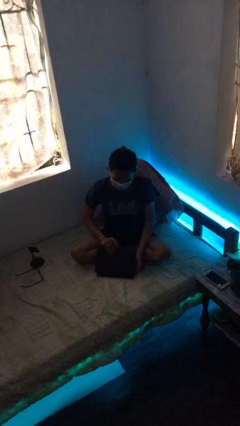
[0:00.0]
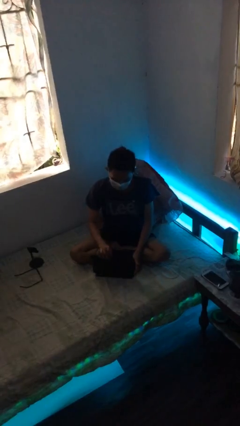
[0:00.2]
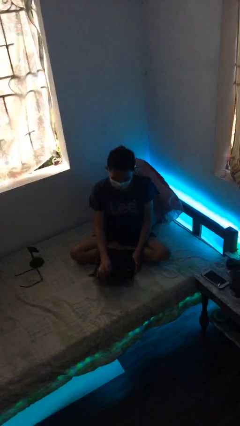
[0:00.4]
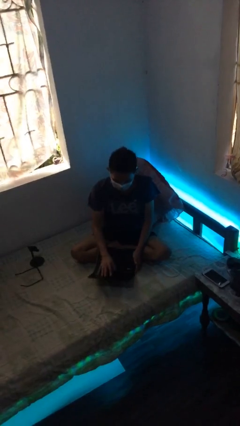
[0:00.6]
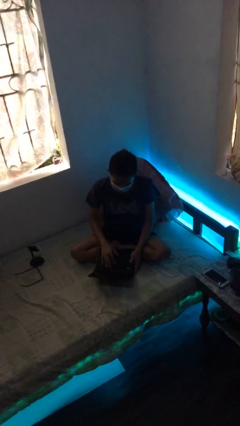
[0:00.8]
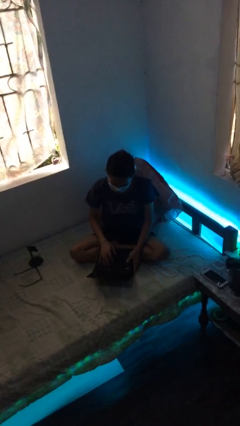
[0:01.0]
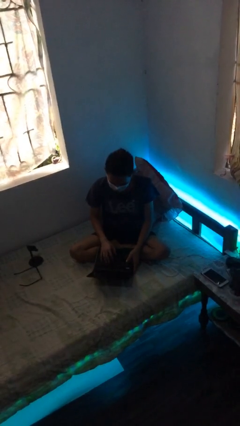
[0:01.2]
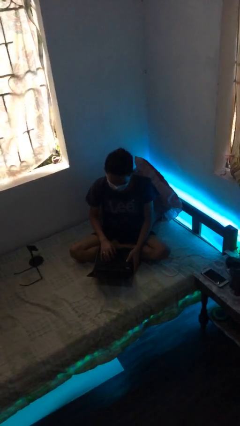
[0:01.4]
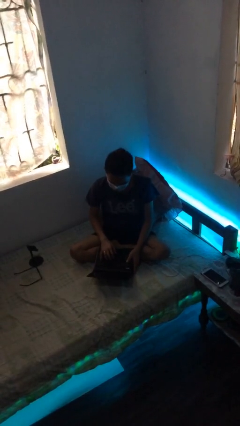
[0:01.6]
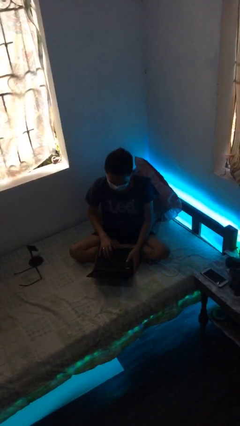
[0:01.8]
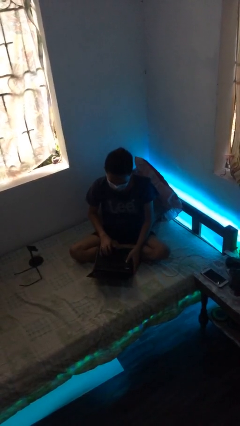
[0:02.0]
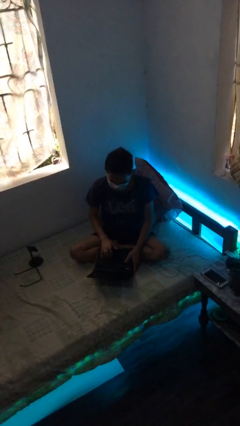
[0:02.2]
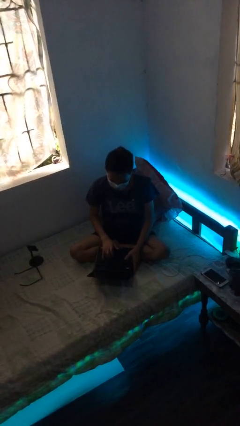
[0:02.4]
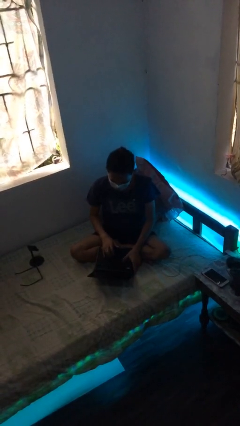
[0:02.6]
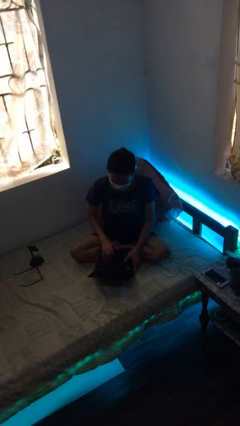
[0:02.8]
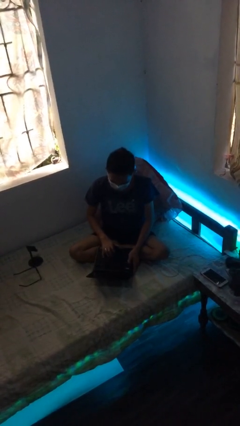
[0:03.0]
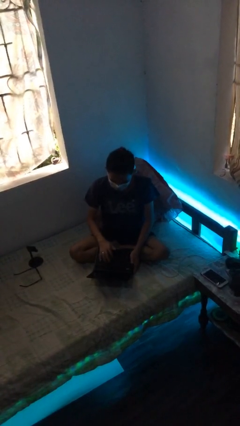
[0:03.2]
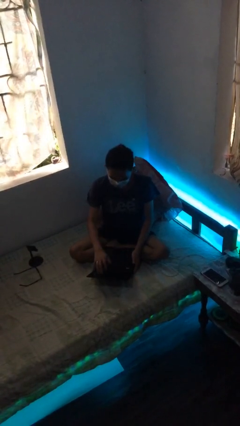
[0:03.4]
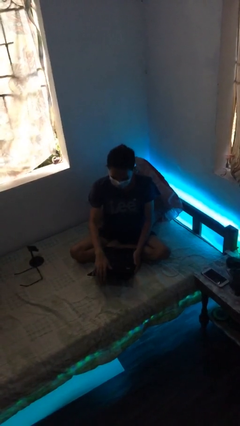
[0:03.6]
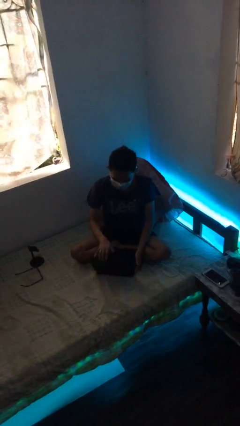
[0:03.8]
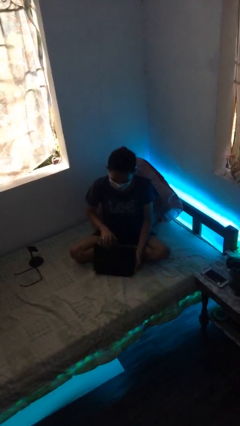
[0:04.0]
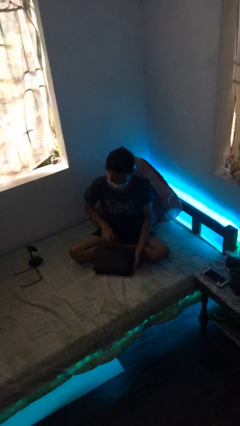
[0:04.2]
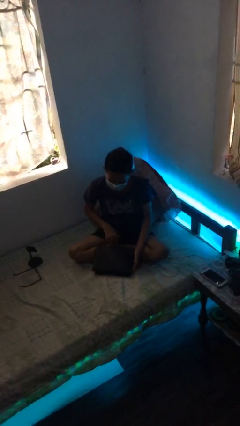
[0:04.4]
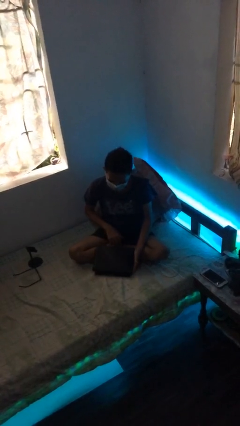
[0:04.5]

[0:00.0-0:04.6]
person interacts with laptop

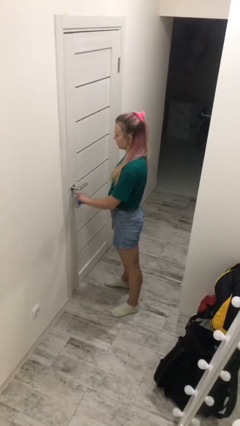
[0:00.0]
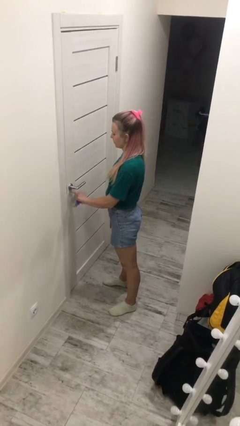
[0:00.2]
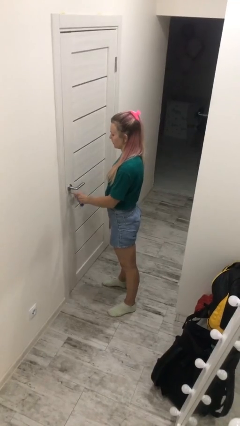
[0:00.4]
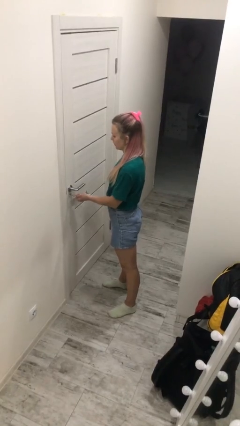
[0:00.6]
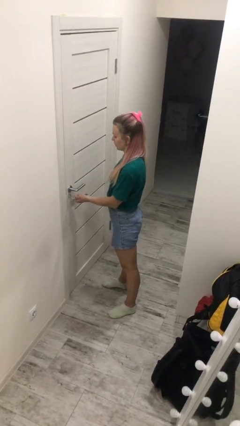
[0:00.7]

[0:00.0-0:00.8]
person locks door with keys

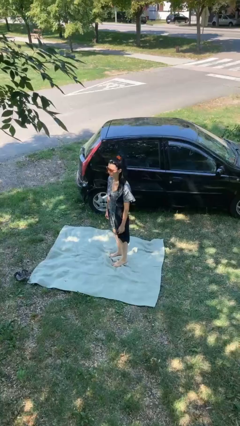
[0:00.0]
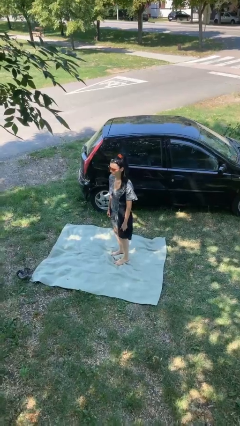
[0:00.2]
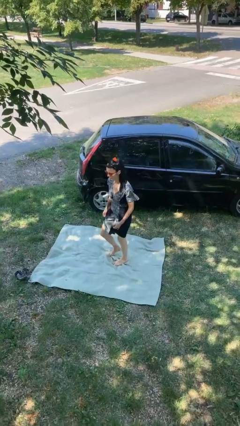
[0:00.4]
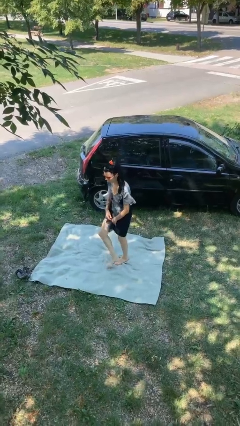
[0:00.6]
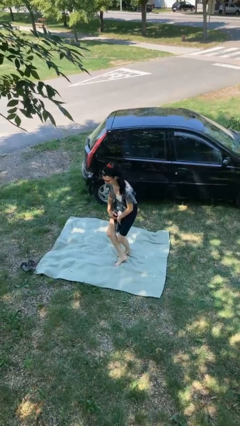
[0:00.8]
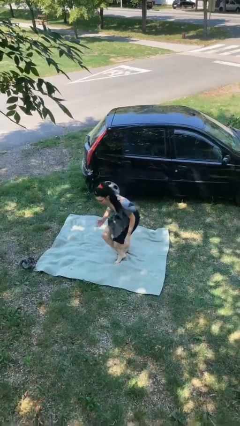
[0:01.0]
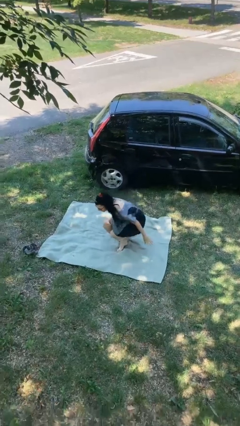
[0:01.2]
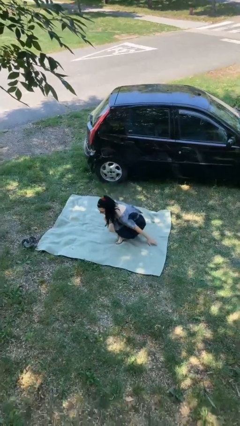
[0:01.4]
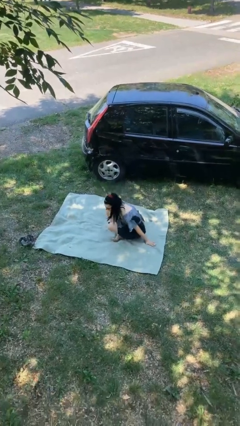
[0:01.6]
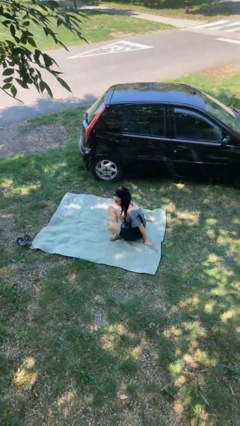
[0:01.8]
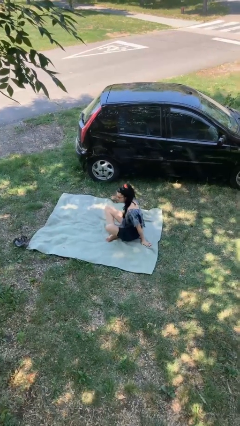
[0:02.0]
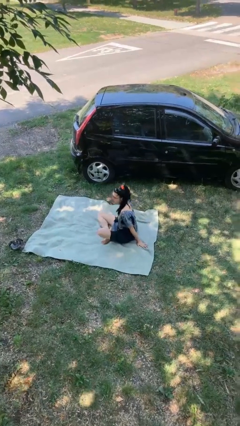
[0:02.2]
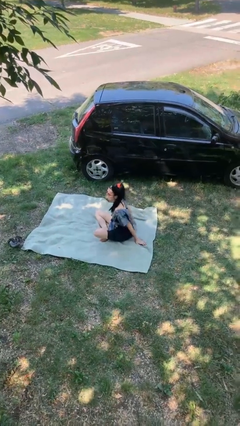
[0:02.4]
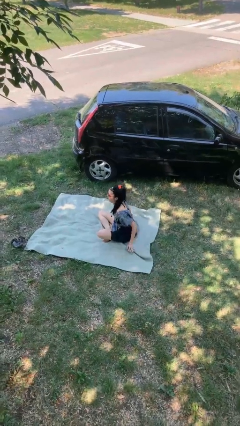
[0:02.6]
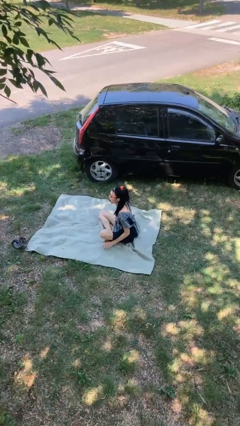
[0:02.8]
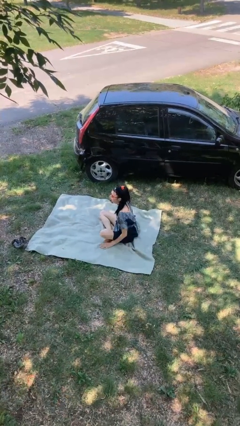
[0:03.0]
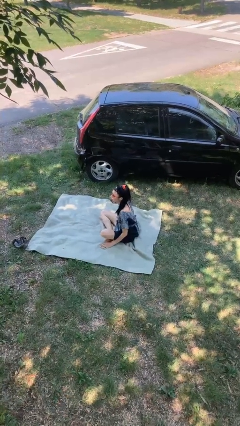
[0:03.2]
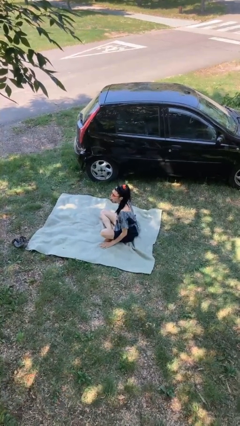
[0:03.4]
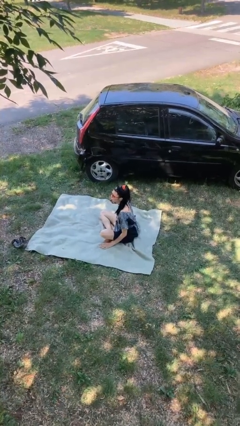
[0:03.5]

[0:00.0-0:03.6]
person sits crisscross

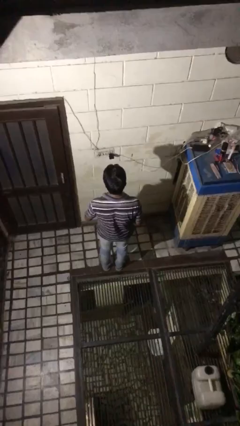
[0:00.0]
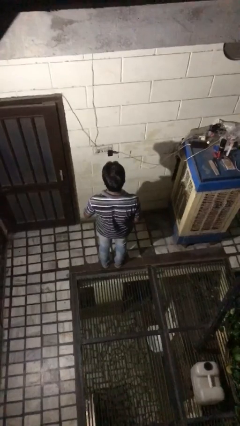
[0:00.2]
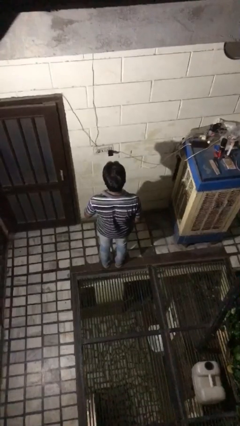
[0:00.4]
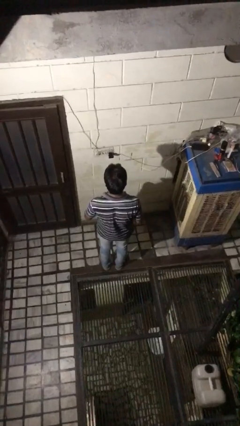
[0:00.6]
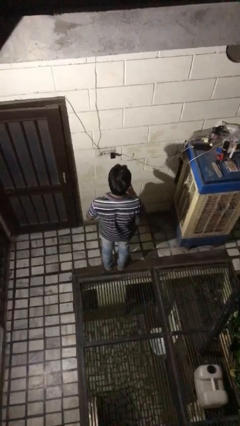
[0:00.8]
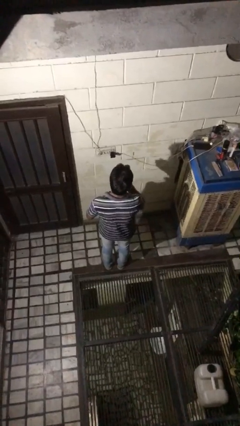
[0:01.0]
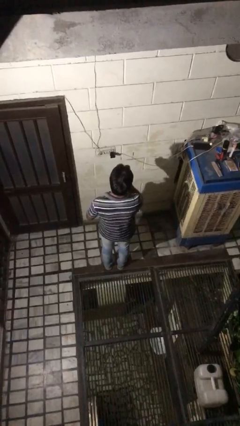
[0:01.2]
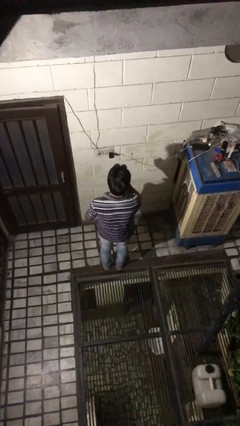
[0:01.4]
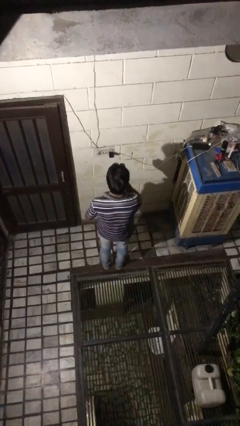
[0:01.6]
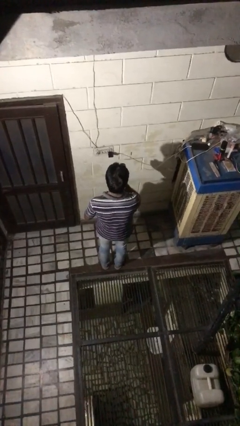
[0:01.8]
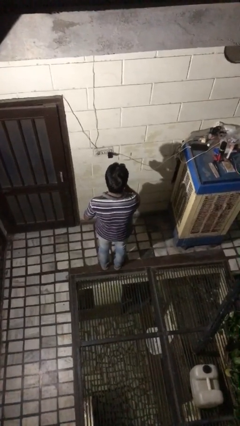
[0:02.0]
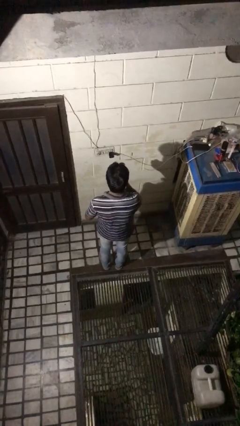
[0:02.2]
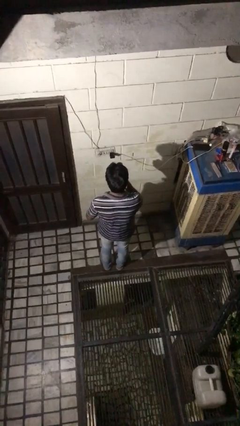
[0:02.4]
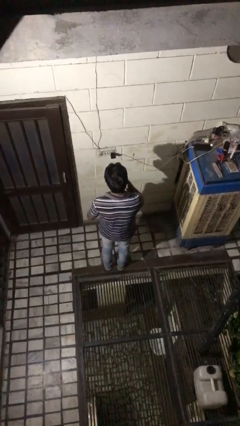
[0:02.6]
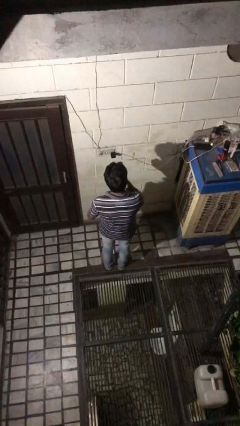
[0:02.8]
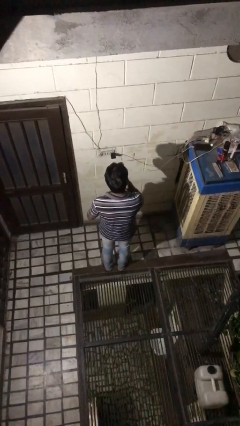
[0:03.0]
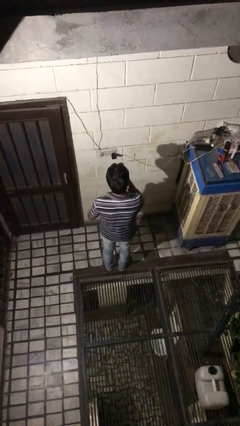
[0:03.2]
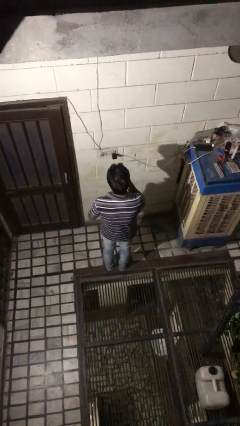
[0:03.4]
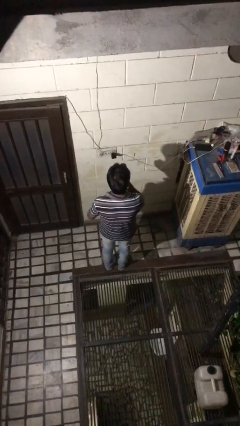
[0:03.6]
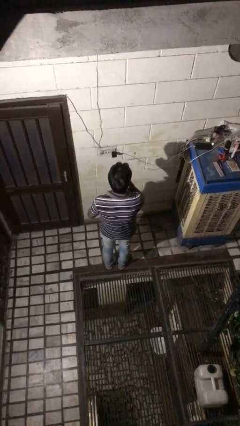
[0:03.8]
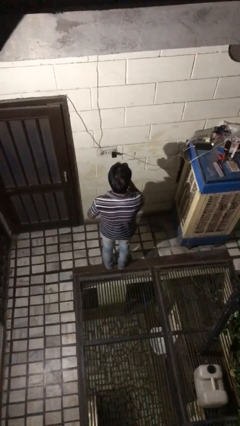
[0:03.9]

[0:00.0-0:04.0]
person applies lip makeup

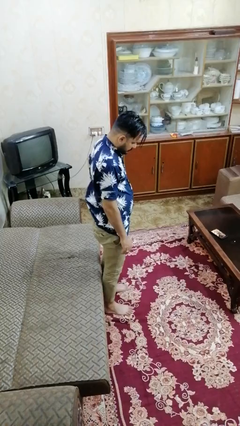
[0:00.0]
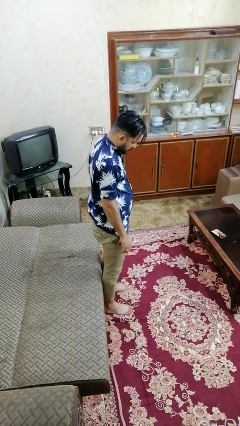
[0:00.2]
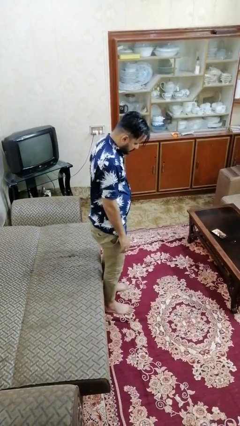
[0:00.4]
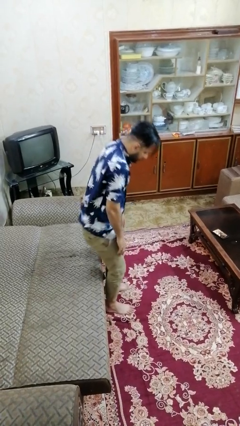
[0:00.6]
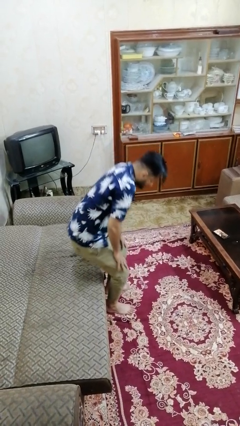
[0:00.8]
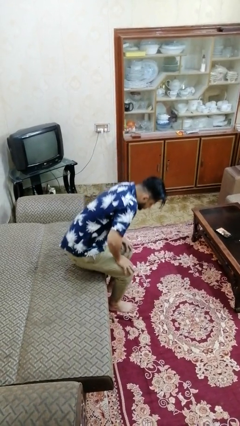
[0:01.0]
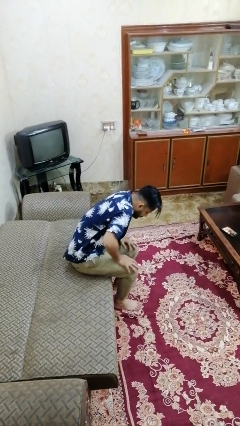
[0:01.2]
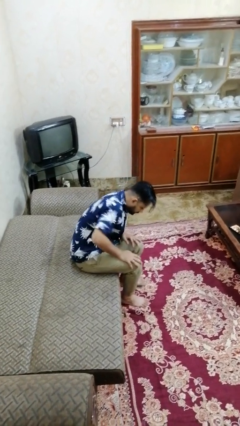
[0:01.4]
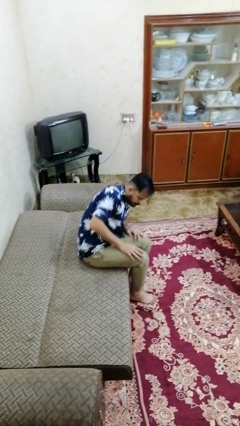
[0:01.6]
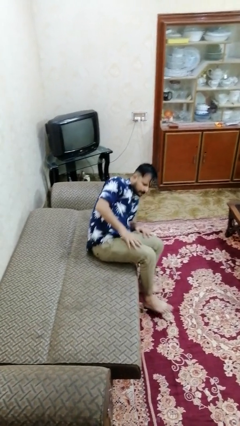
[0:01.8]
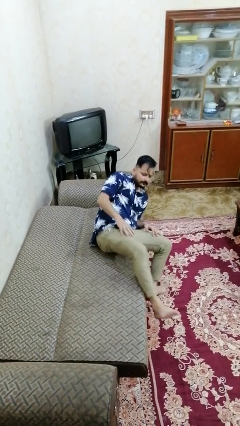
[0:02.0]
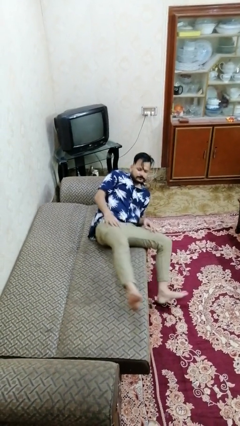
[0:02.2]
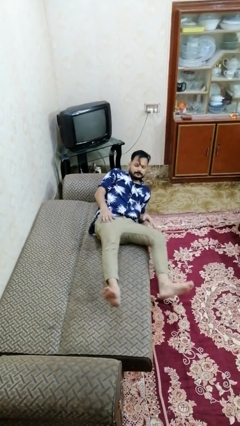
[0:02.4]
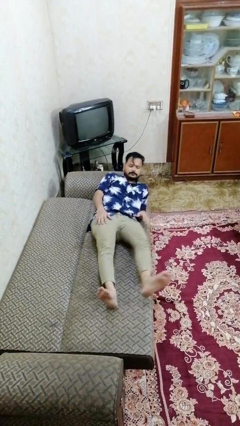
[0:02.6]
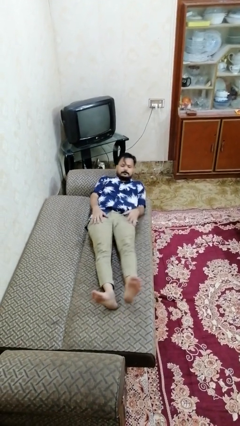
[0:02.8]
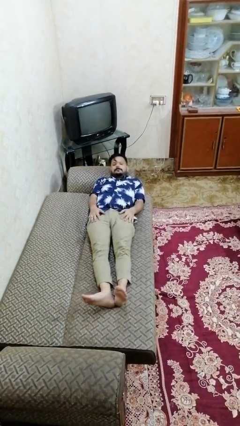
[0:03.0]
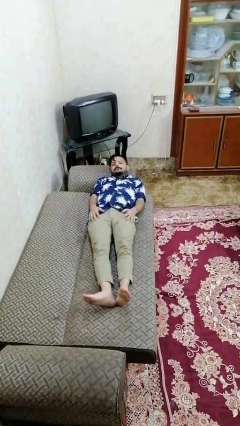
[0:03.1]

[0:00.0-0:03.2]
person lies down on bed

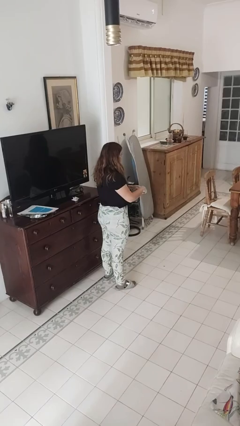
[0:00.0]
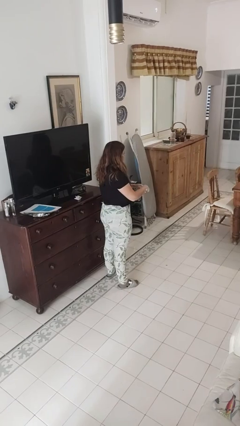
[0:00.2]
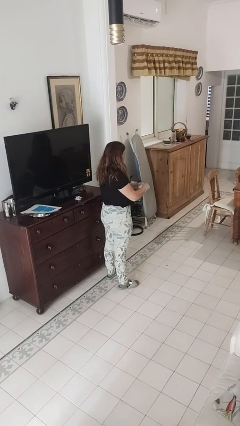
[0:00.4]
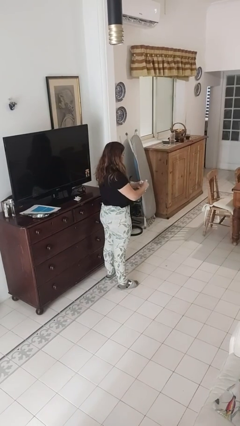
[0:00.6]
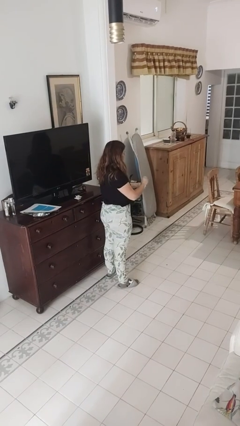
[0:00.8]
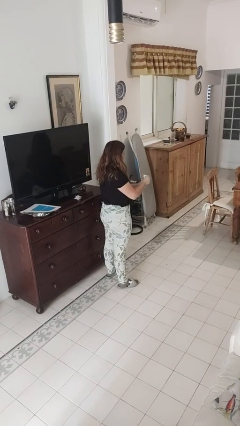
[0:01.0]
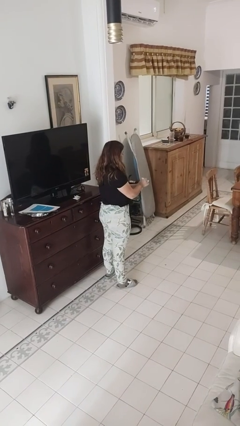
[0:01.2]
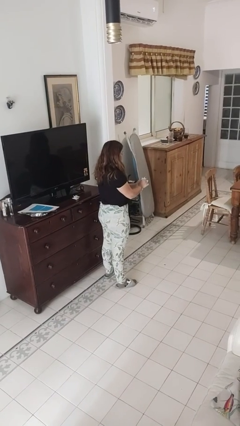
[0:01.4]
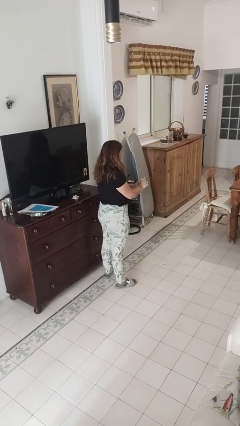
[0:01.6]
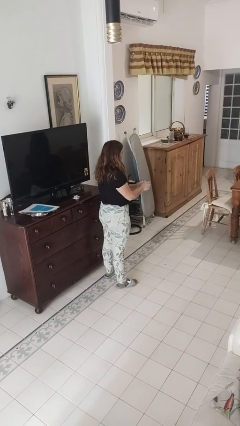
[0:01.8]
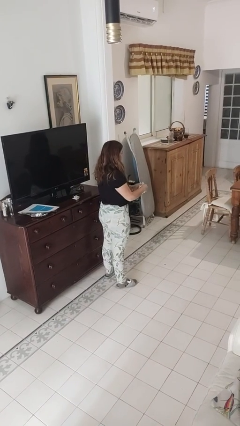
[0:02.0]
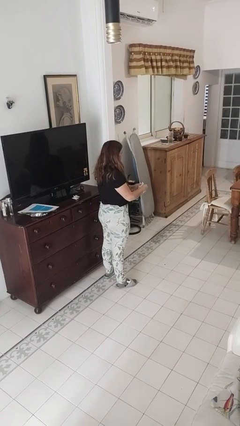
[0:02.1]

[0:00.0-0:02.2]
person tears paper
